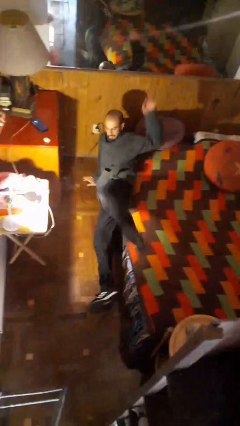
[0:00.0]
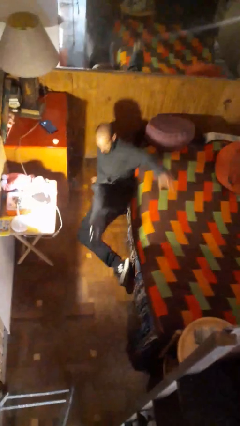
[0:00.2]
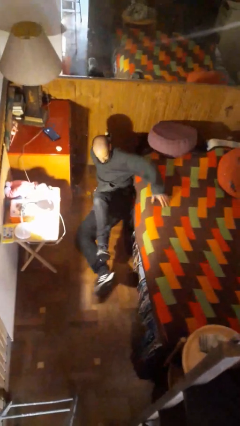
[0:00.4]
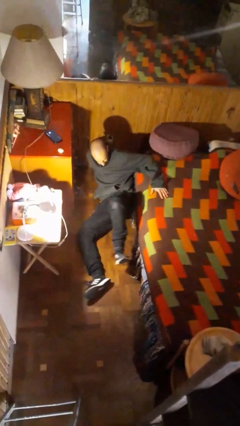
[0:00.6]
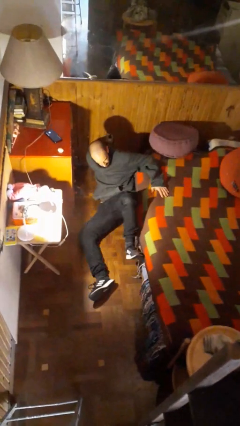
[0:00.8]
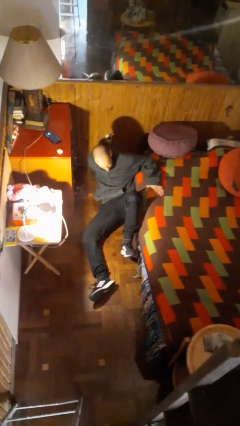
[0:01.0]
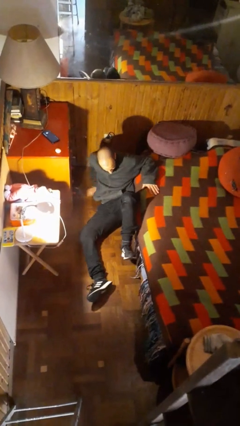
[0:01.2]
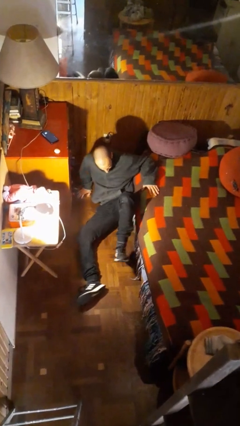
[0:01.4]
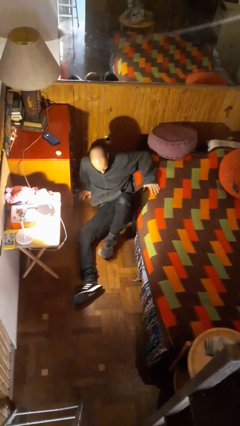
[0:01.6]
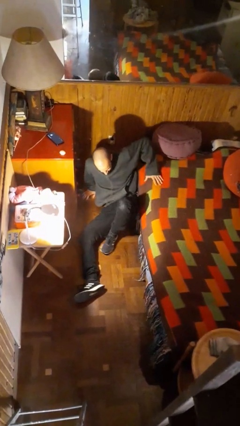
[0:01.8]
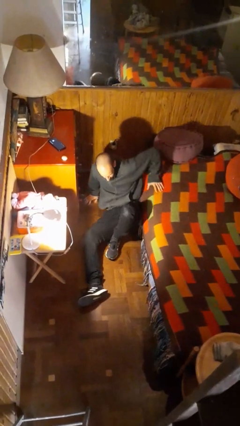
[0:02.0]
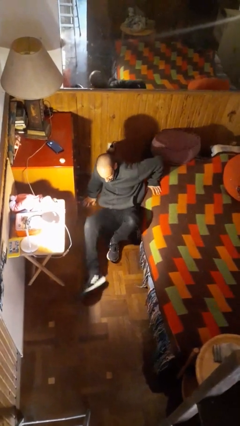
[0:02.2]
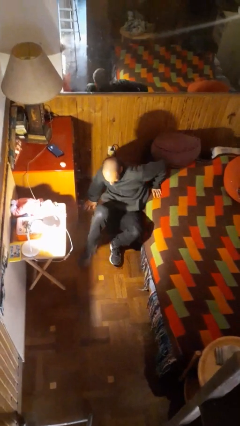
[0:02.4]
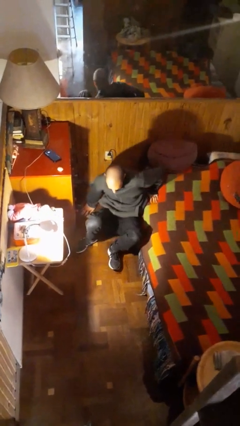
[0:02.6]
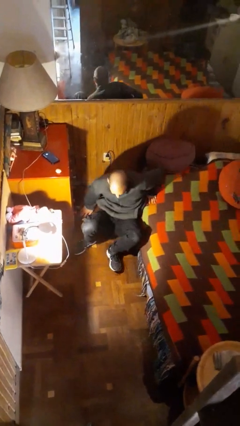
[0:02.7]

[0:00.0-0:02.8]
person falls from bed

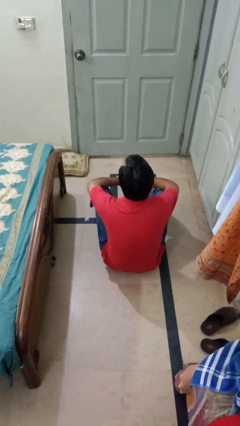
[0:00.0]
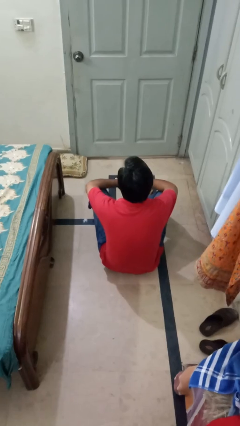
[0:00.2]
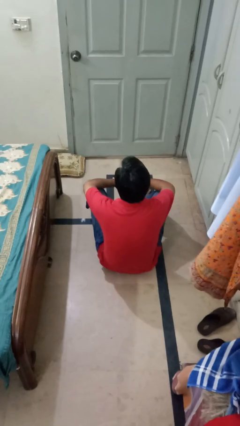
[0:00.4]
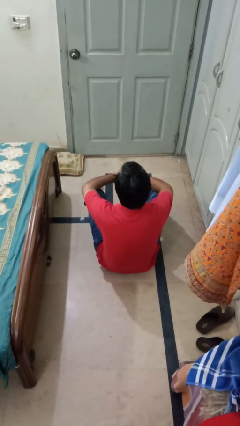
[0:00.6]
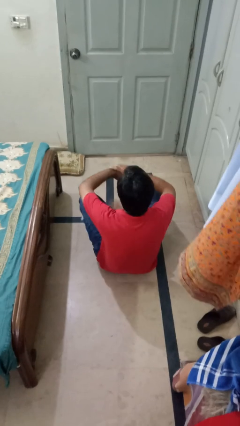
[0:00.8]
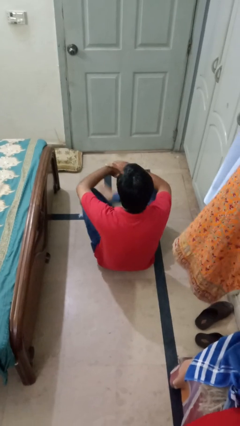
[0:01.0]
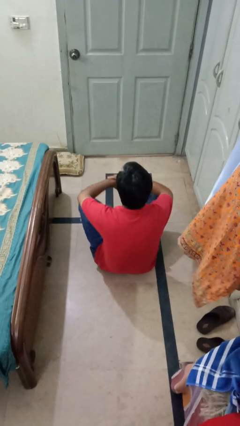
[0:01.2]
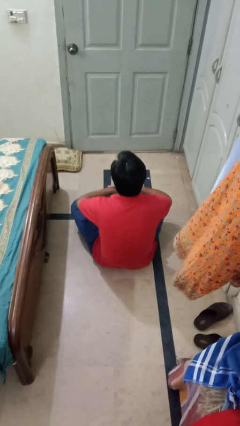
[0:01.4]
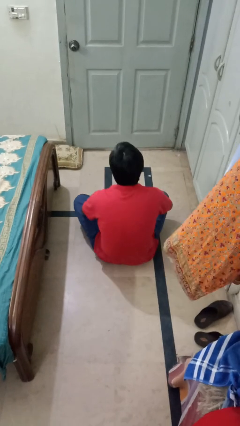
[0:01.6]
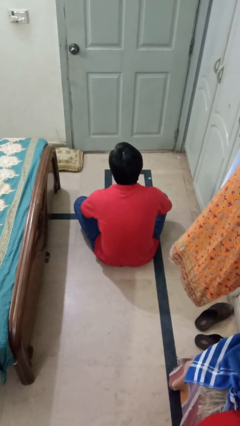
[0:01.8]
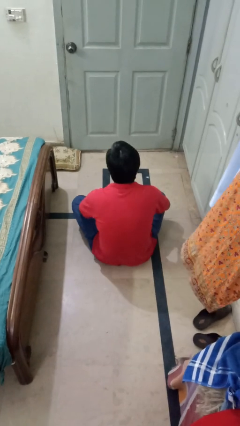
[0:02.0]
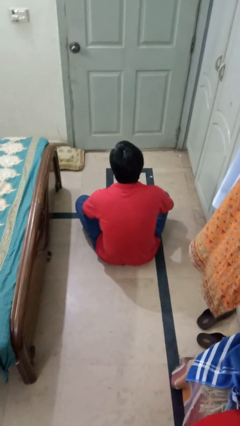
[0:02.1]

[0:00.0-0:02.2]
person crosses legs

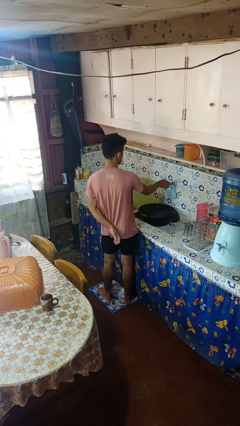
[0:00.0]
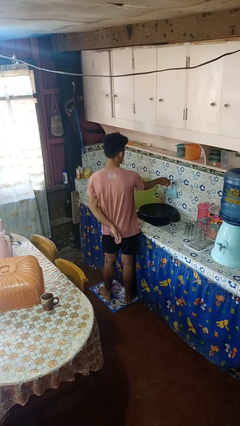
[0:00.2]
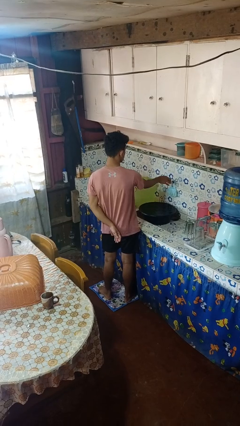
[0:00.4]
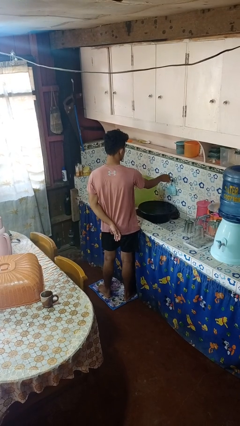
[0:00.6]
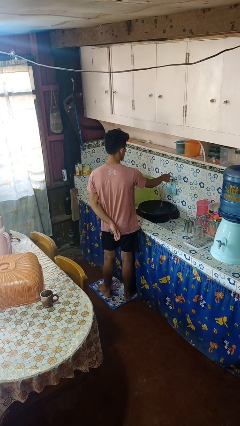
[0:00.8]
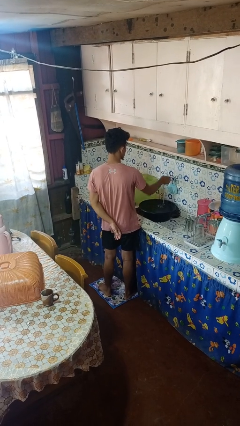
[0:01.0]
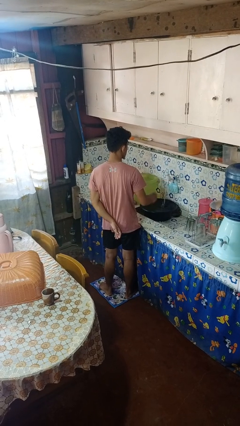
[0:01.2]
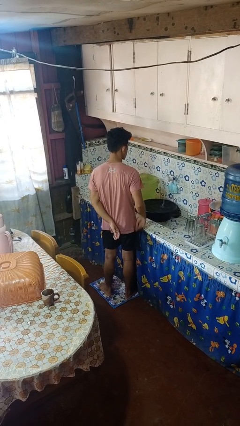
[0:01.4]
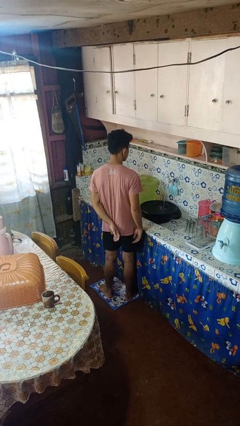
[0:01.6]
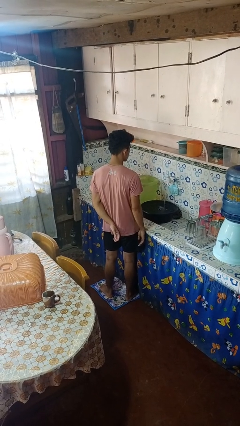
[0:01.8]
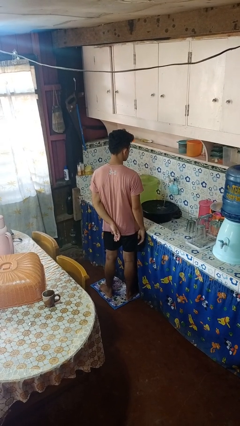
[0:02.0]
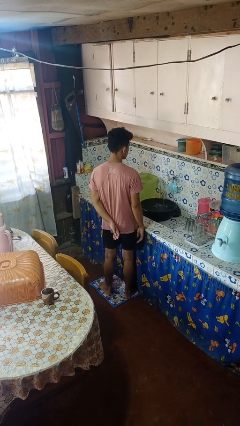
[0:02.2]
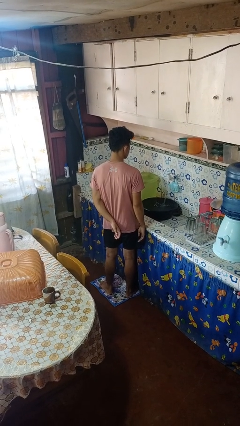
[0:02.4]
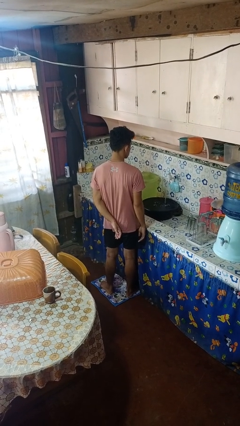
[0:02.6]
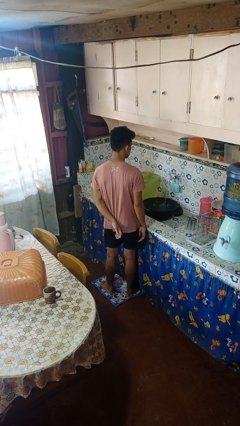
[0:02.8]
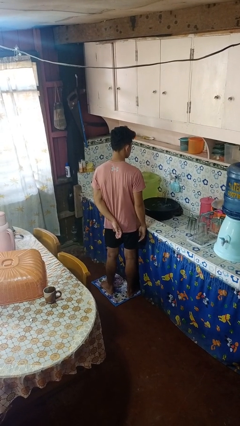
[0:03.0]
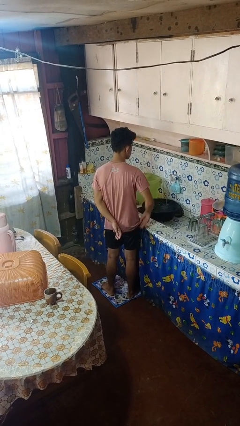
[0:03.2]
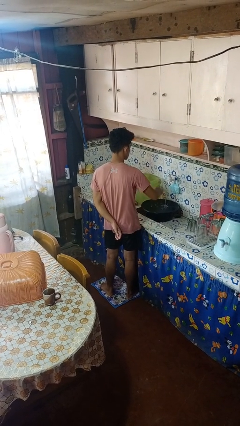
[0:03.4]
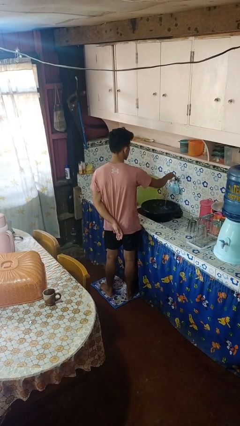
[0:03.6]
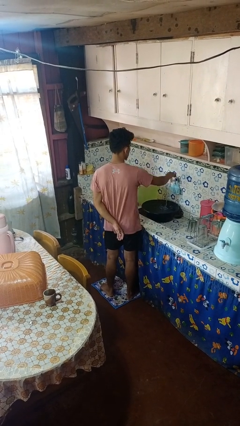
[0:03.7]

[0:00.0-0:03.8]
person turns on faucet

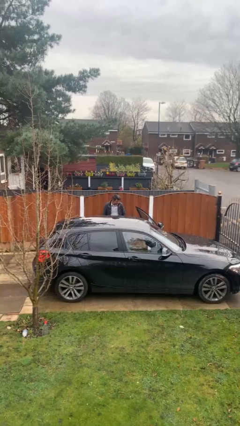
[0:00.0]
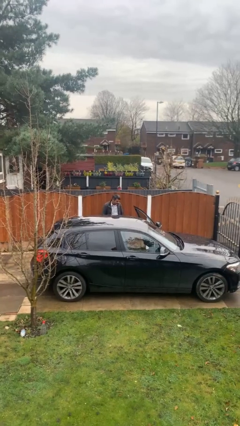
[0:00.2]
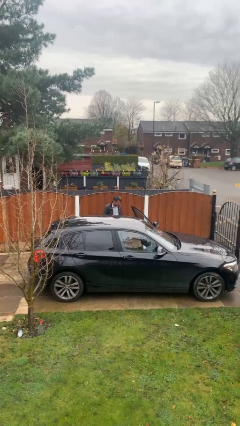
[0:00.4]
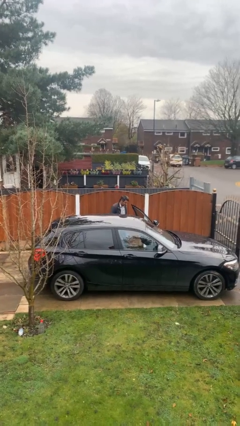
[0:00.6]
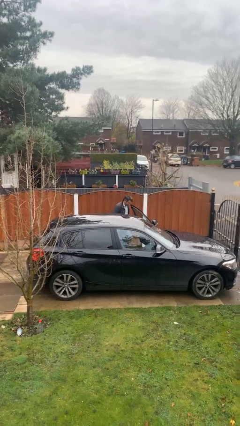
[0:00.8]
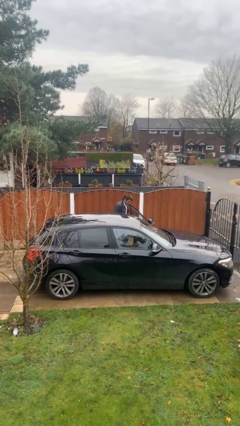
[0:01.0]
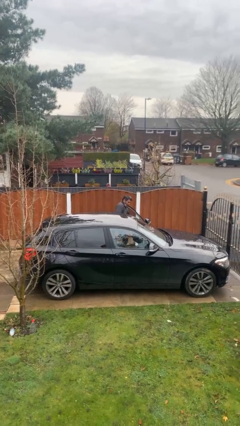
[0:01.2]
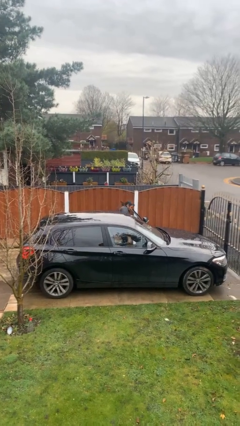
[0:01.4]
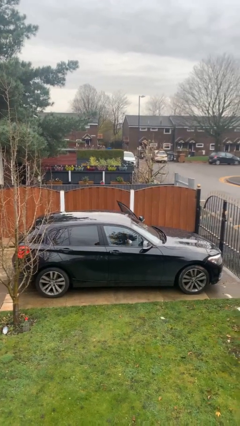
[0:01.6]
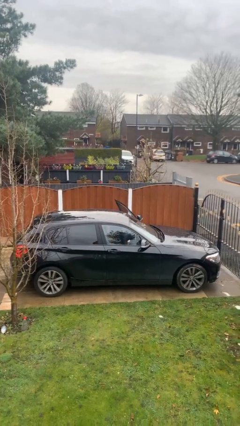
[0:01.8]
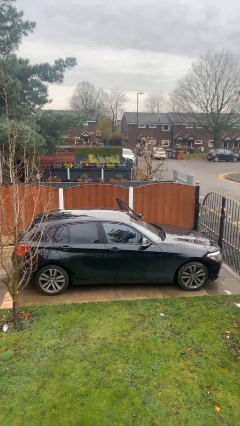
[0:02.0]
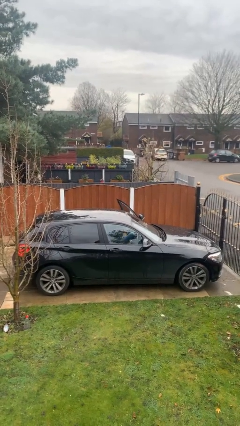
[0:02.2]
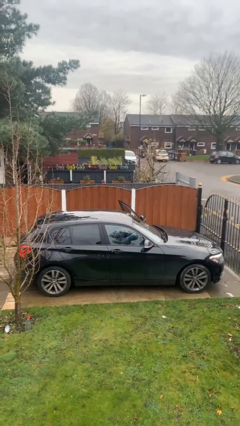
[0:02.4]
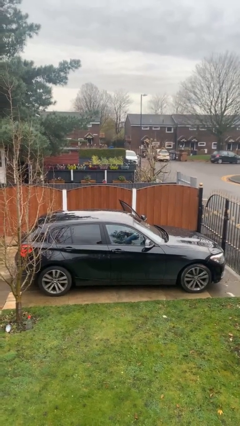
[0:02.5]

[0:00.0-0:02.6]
person enters car

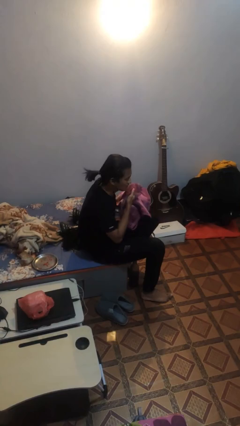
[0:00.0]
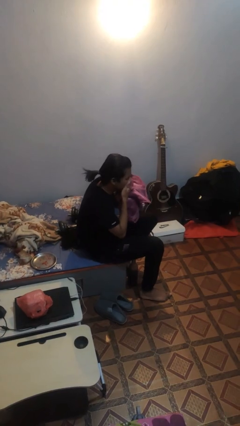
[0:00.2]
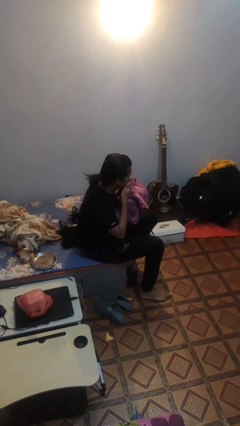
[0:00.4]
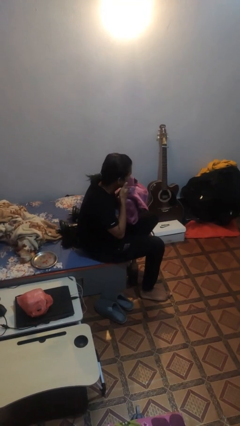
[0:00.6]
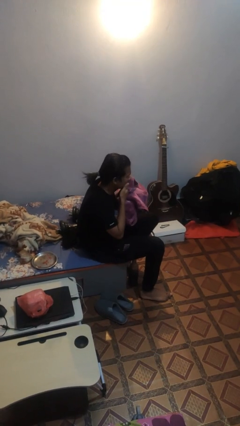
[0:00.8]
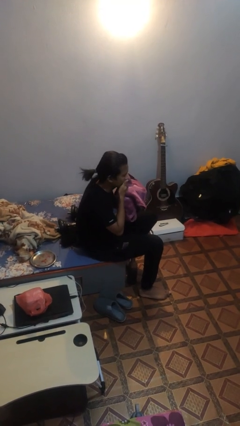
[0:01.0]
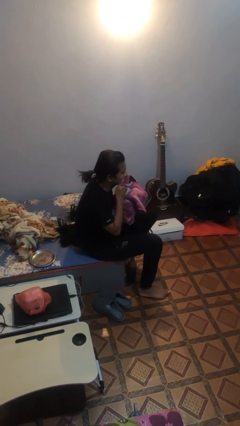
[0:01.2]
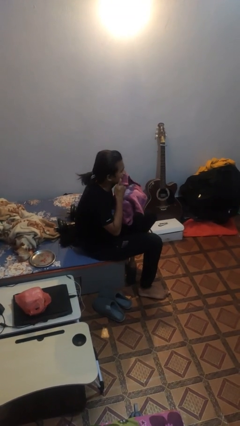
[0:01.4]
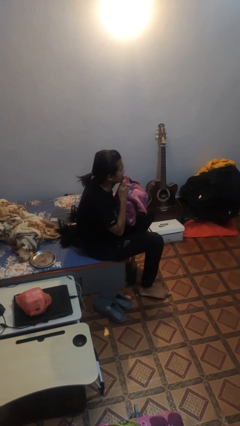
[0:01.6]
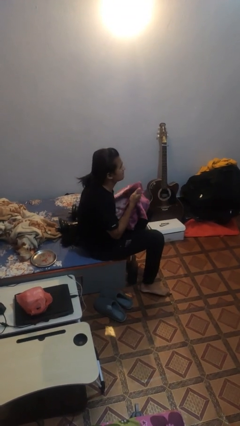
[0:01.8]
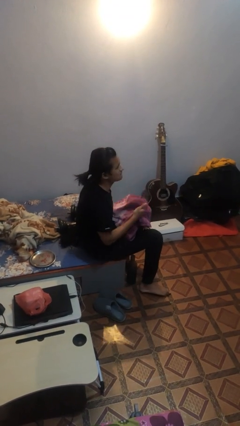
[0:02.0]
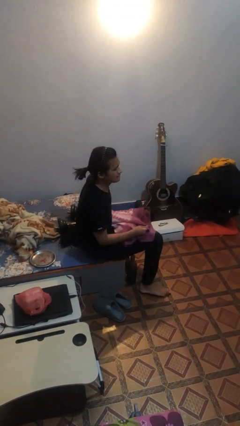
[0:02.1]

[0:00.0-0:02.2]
person wipes mouth with napkin

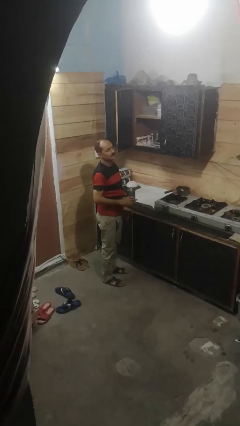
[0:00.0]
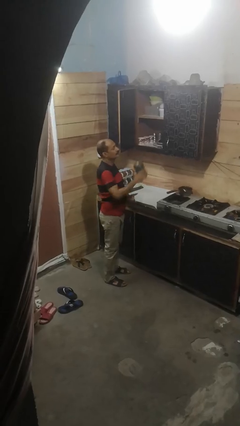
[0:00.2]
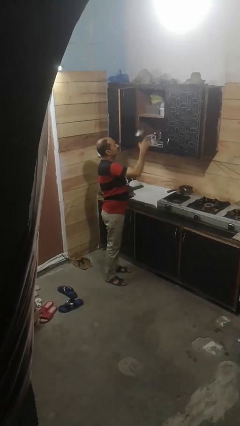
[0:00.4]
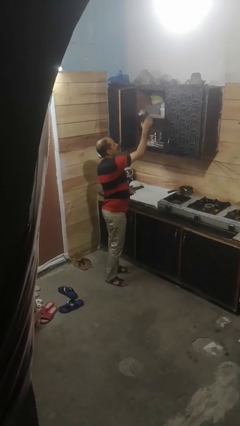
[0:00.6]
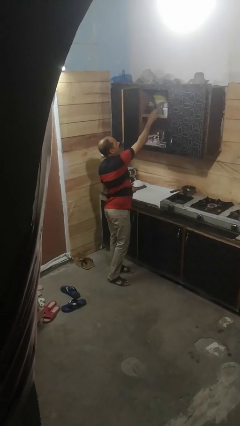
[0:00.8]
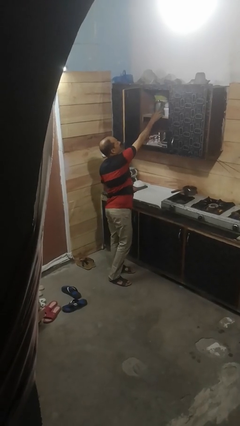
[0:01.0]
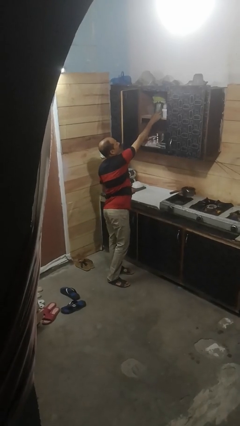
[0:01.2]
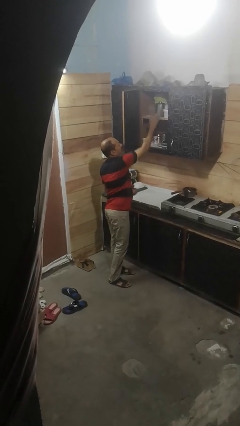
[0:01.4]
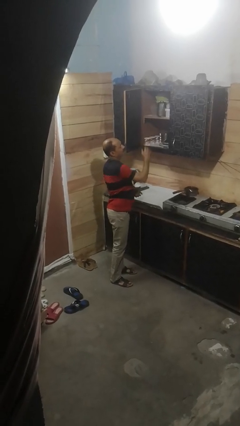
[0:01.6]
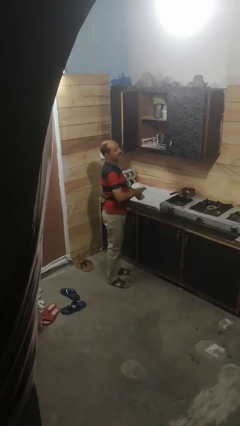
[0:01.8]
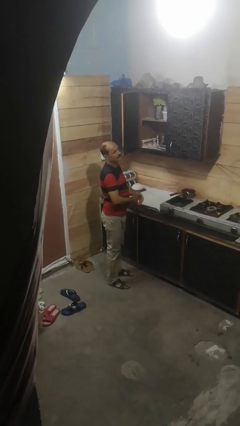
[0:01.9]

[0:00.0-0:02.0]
person puts down object into cabinet

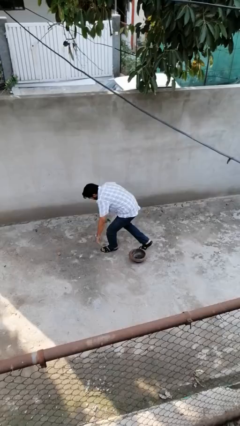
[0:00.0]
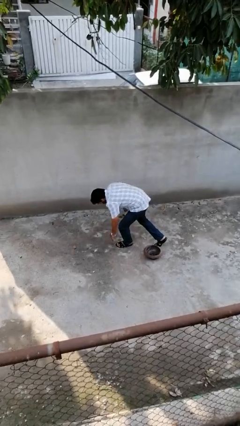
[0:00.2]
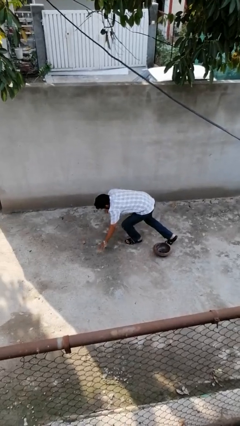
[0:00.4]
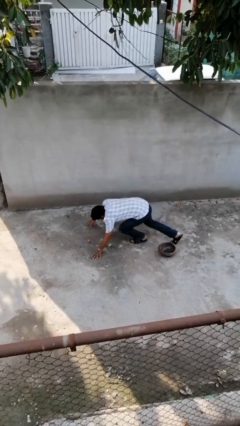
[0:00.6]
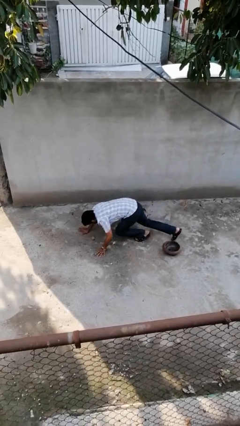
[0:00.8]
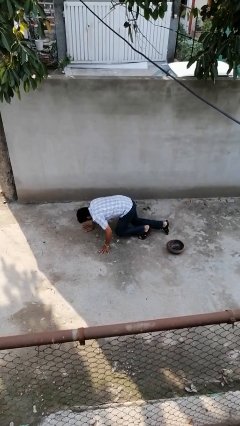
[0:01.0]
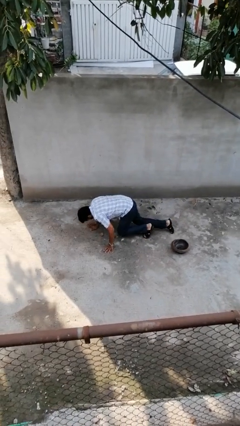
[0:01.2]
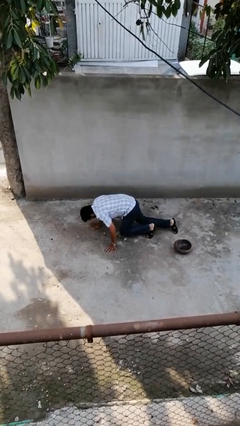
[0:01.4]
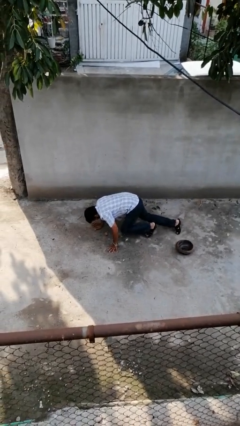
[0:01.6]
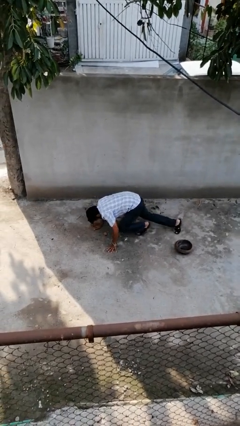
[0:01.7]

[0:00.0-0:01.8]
person lies down on floor
